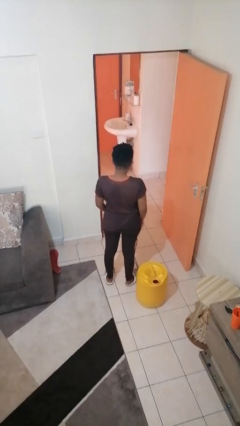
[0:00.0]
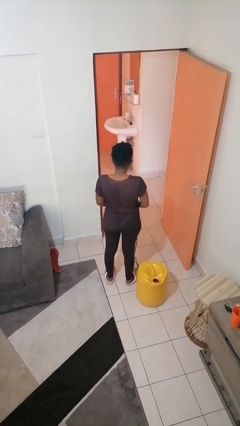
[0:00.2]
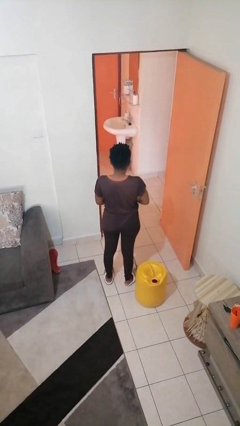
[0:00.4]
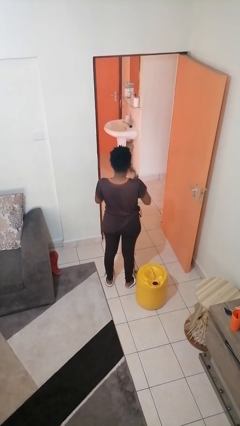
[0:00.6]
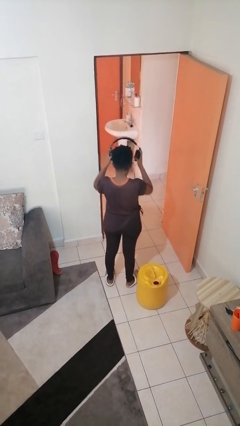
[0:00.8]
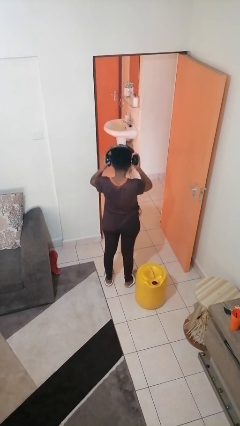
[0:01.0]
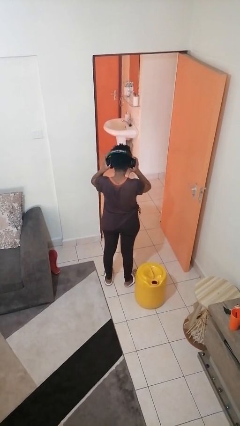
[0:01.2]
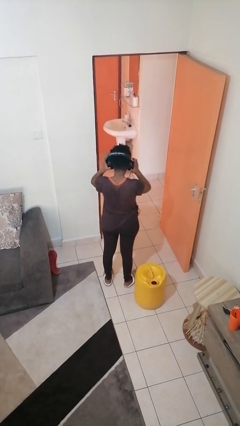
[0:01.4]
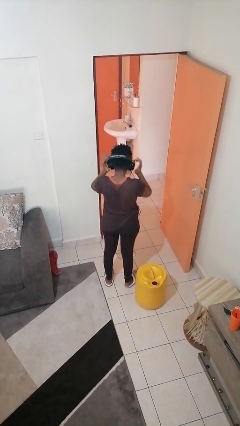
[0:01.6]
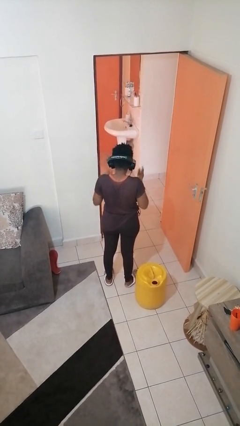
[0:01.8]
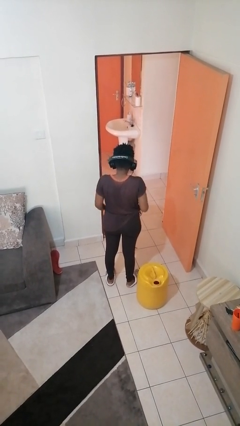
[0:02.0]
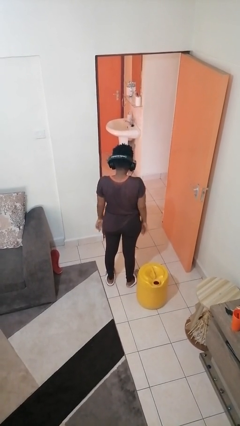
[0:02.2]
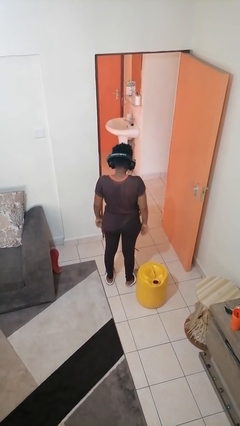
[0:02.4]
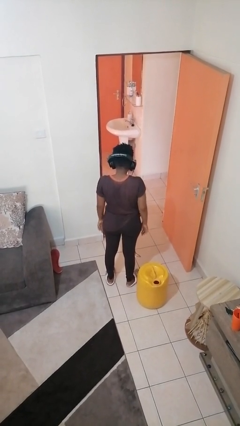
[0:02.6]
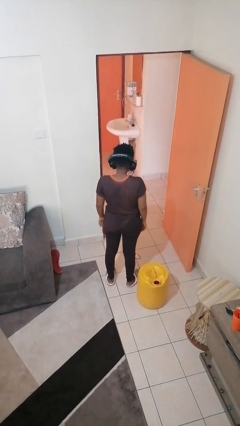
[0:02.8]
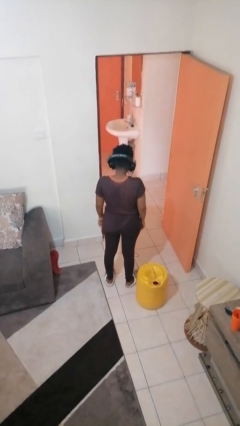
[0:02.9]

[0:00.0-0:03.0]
person puts on headphones

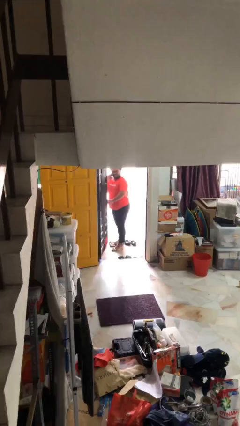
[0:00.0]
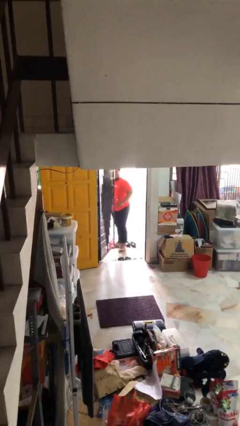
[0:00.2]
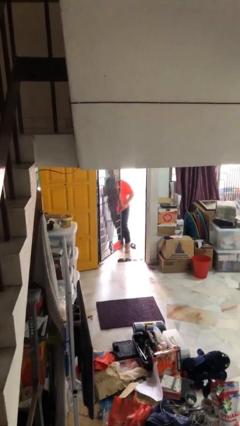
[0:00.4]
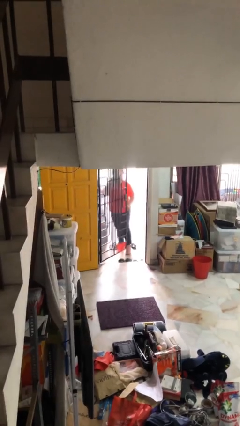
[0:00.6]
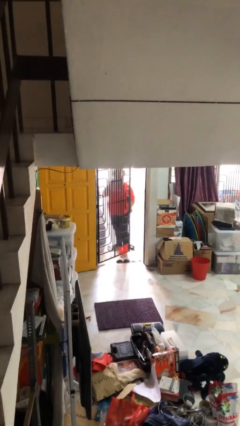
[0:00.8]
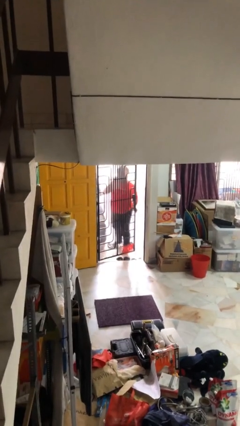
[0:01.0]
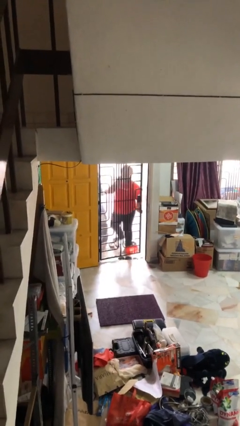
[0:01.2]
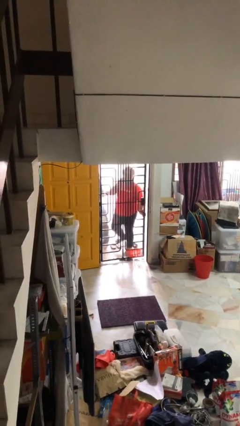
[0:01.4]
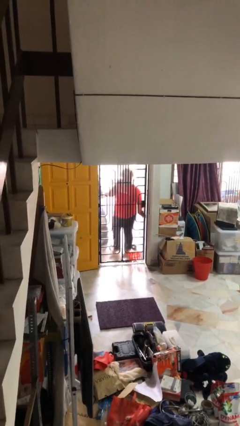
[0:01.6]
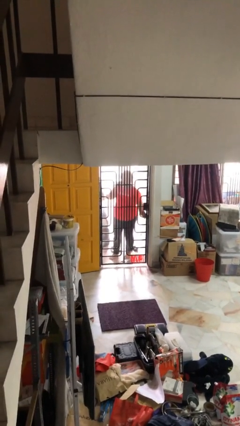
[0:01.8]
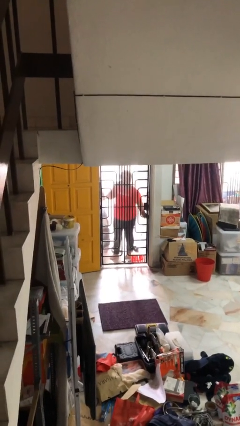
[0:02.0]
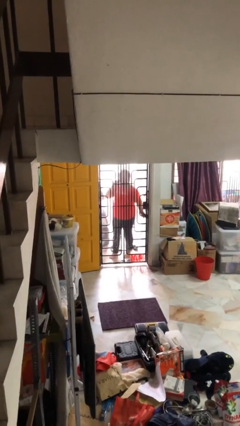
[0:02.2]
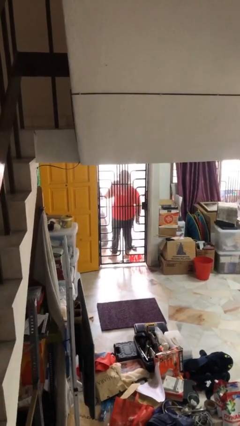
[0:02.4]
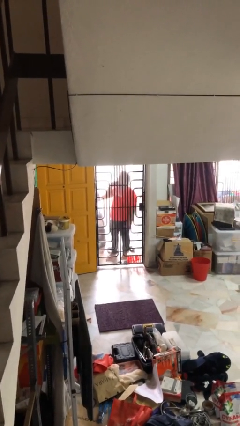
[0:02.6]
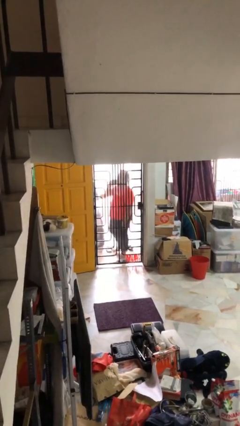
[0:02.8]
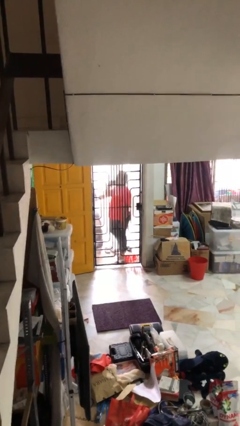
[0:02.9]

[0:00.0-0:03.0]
person closes facility door

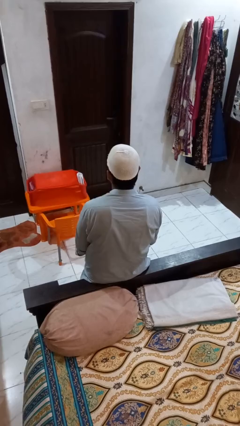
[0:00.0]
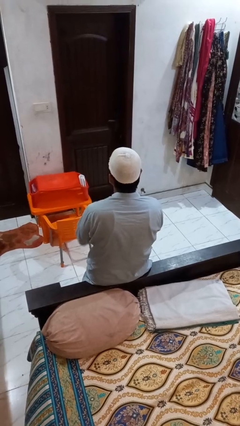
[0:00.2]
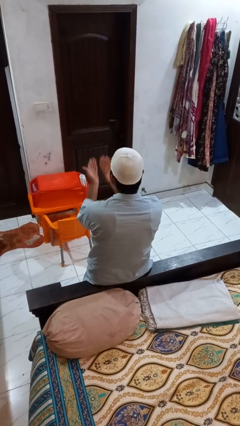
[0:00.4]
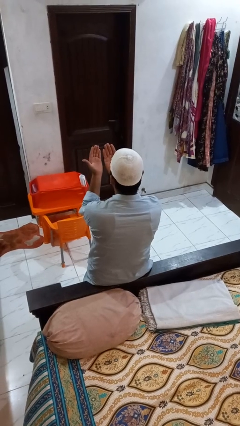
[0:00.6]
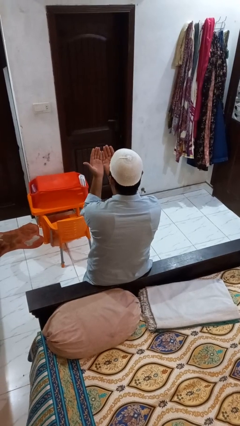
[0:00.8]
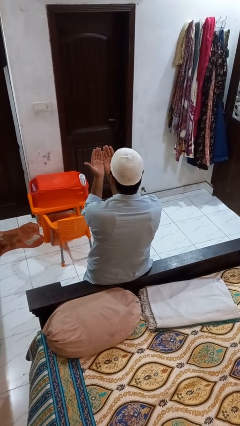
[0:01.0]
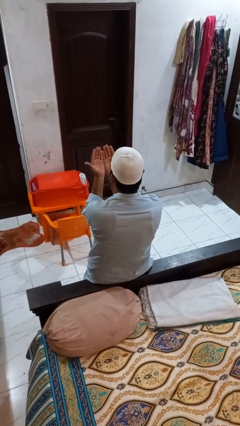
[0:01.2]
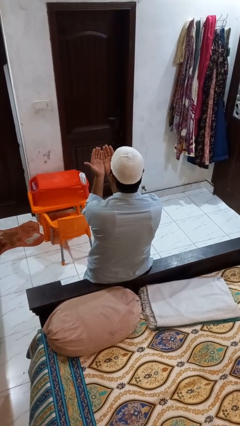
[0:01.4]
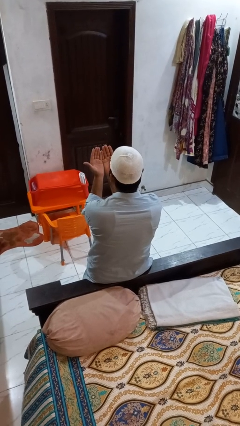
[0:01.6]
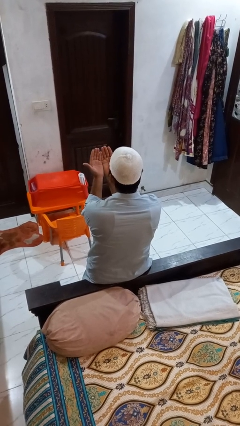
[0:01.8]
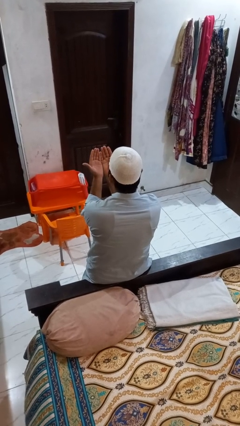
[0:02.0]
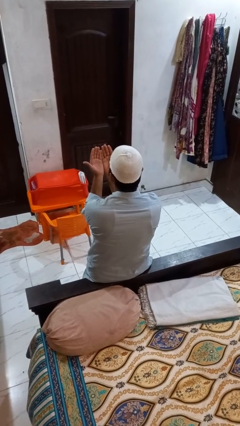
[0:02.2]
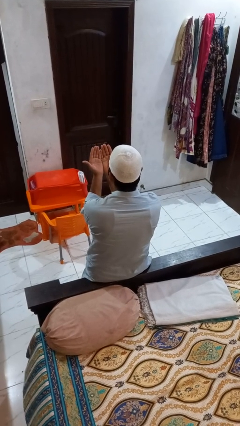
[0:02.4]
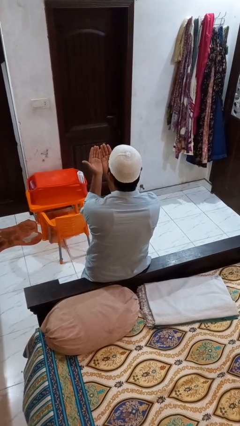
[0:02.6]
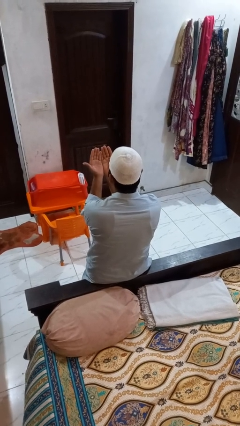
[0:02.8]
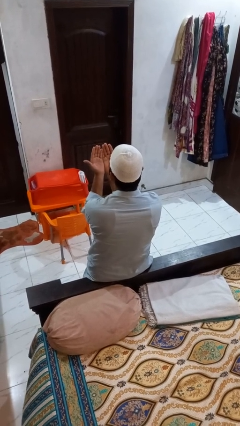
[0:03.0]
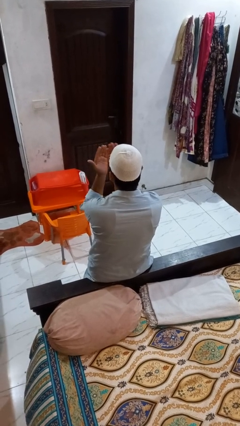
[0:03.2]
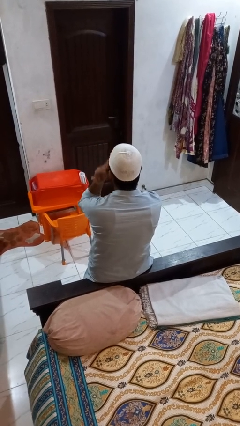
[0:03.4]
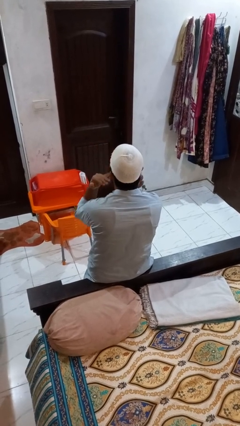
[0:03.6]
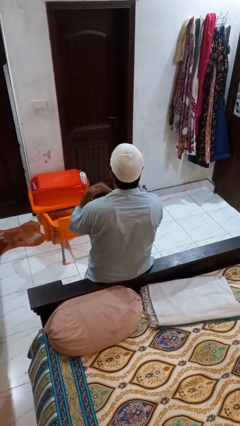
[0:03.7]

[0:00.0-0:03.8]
person prays

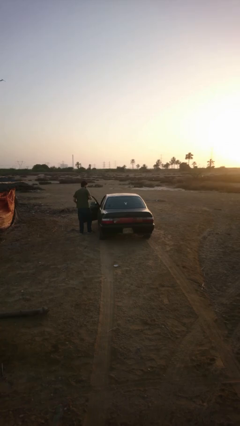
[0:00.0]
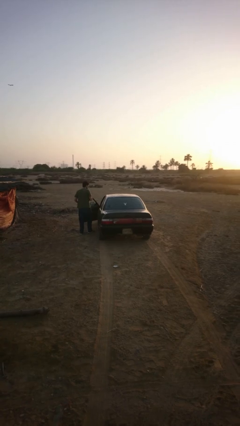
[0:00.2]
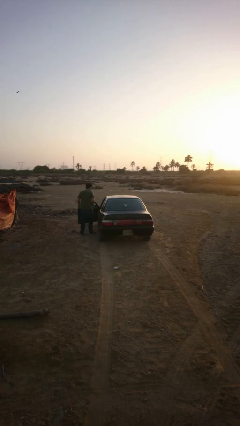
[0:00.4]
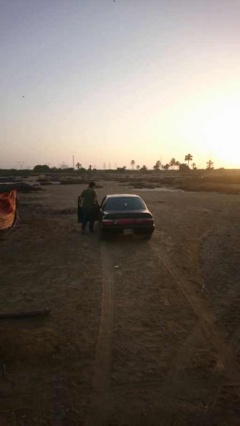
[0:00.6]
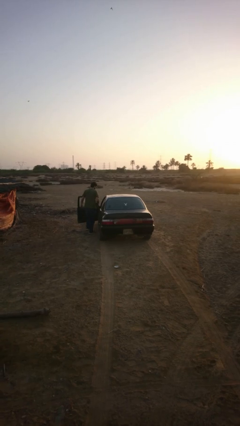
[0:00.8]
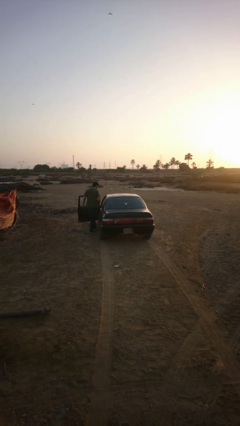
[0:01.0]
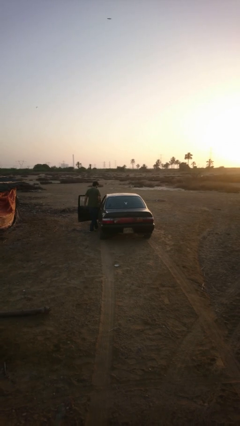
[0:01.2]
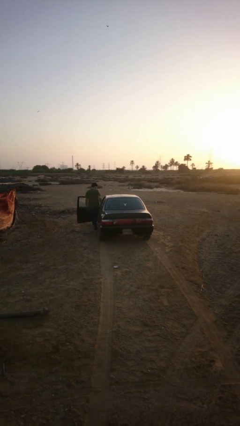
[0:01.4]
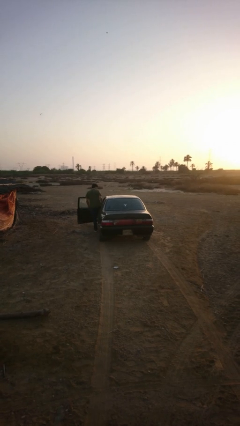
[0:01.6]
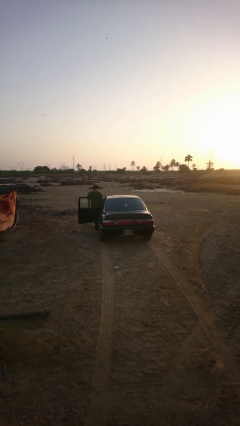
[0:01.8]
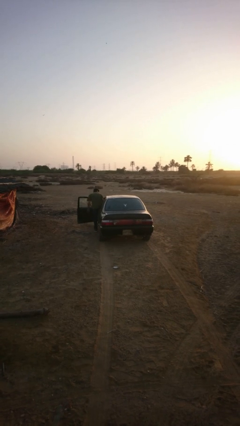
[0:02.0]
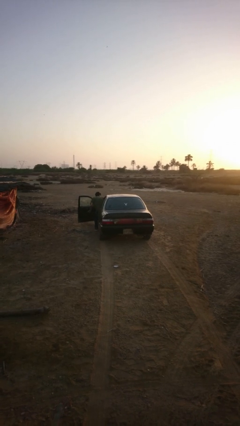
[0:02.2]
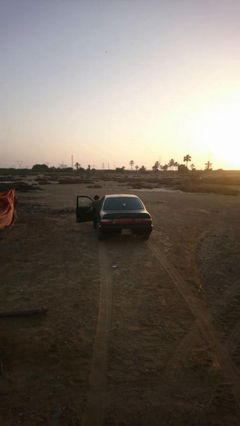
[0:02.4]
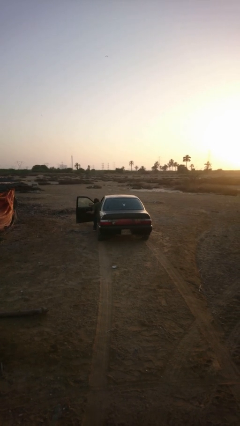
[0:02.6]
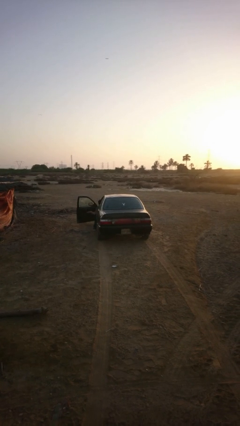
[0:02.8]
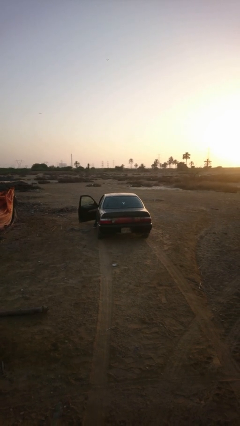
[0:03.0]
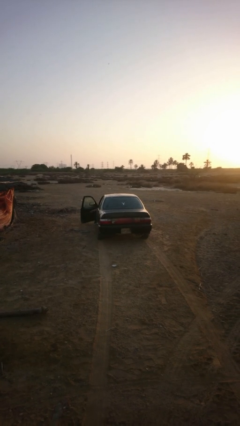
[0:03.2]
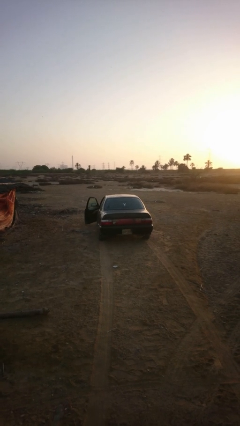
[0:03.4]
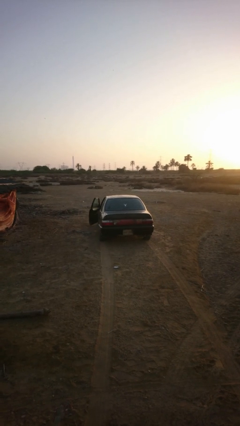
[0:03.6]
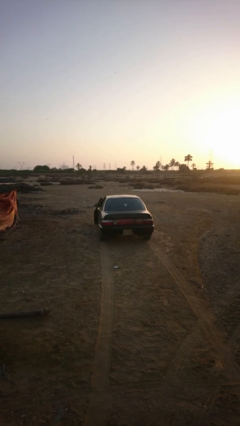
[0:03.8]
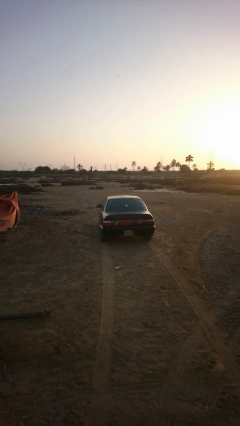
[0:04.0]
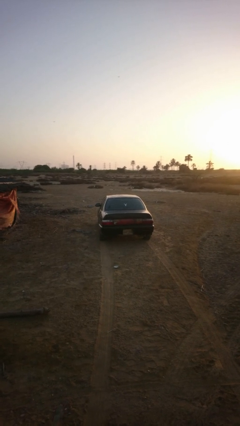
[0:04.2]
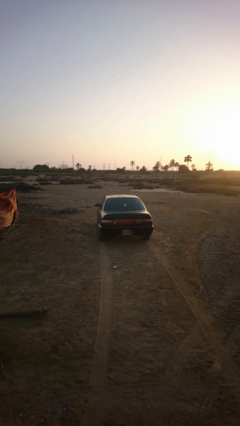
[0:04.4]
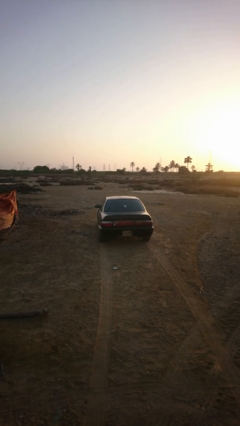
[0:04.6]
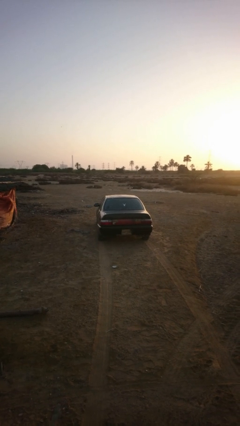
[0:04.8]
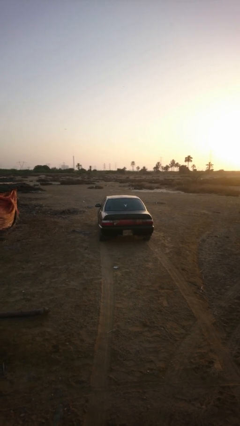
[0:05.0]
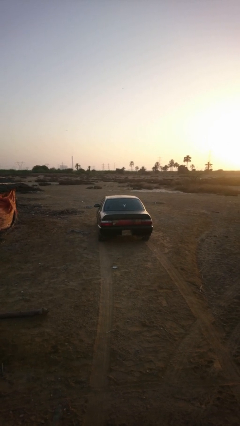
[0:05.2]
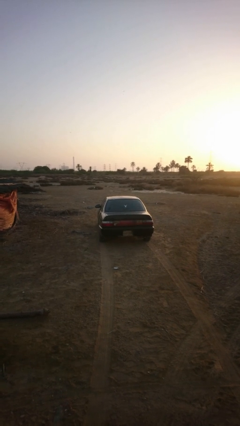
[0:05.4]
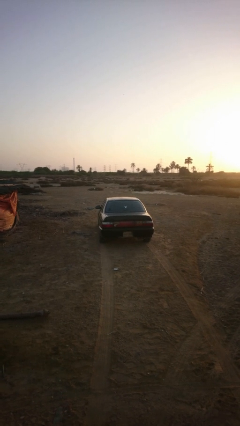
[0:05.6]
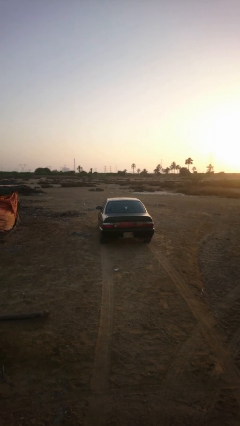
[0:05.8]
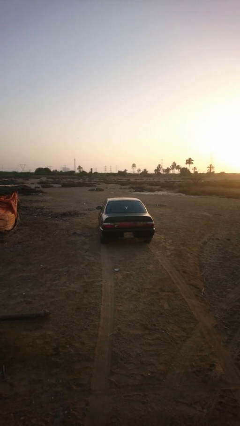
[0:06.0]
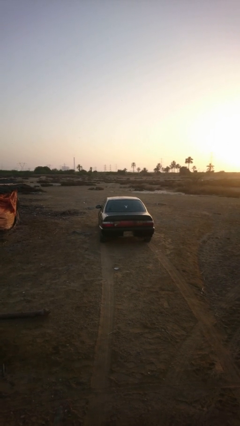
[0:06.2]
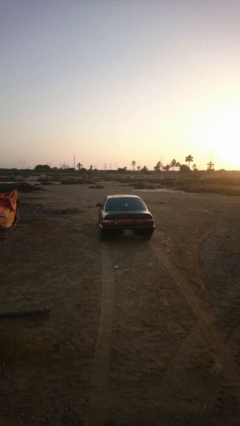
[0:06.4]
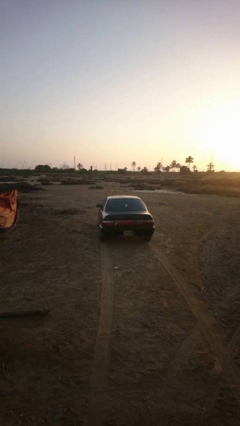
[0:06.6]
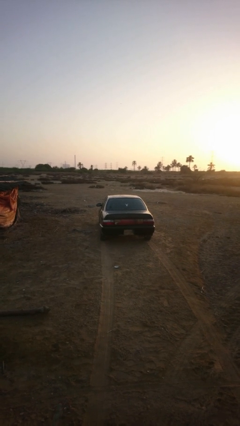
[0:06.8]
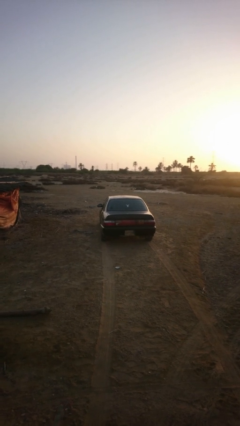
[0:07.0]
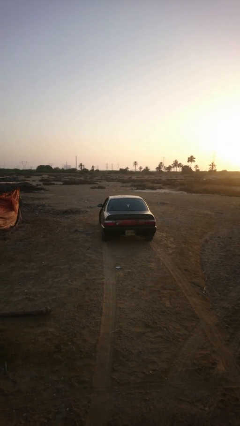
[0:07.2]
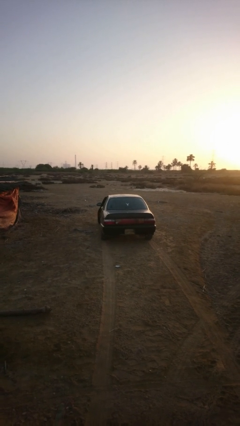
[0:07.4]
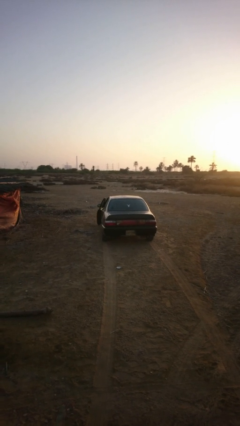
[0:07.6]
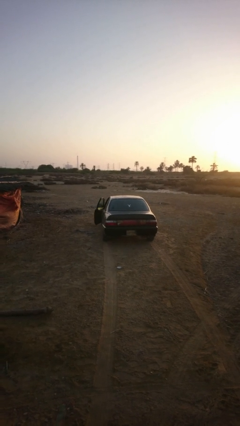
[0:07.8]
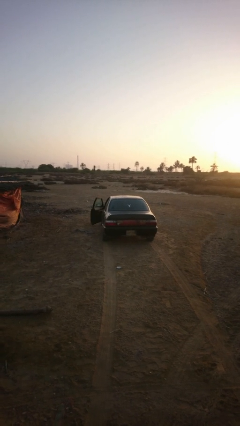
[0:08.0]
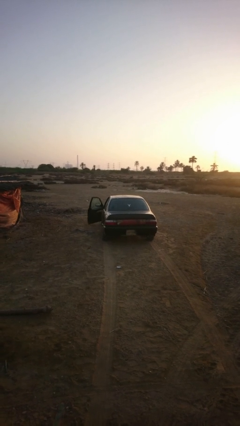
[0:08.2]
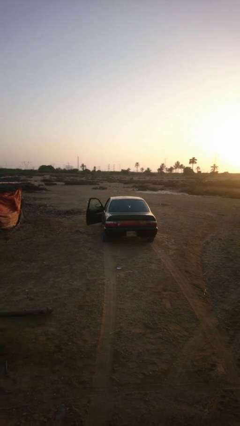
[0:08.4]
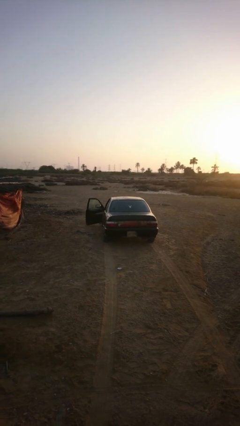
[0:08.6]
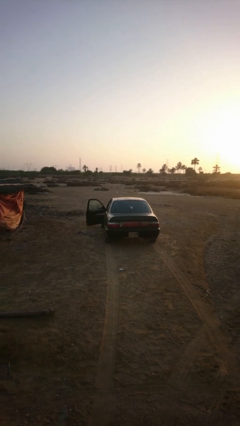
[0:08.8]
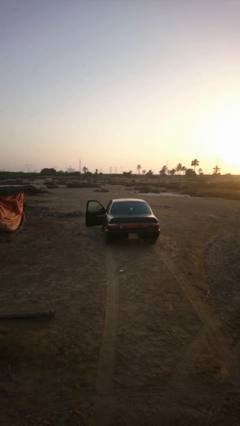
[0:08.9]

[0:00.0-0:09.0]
car picks up person
